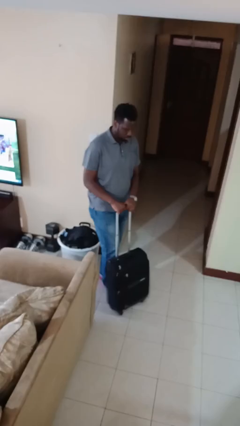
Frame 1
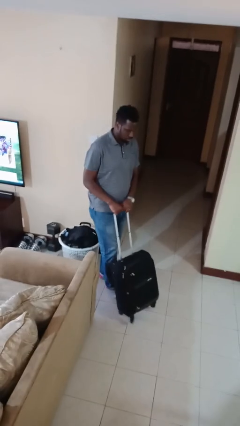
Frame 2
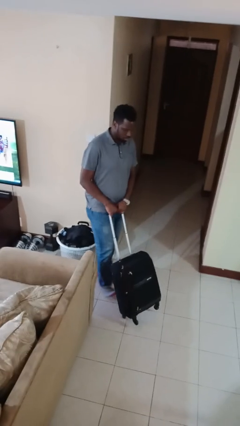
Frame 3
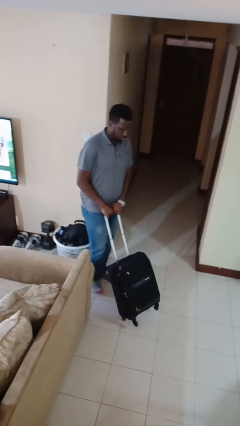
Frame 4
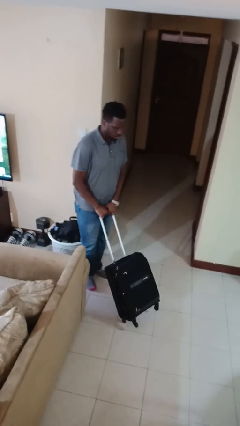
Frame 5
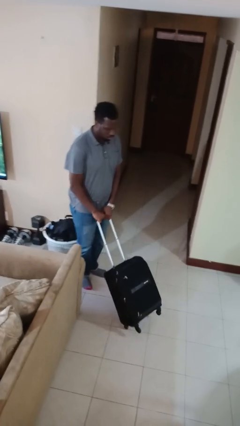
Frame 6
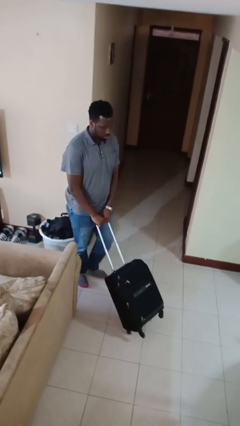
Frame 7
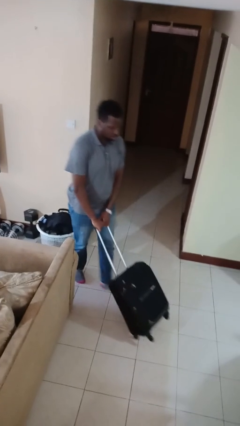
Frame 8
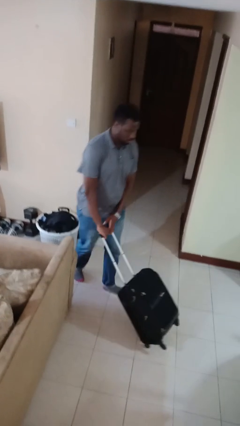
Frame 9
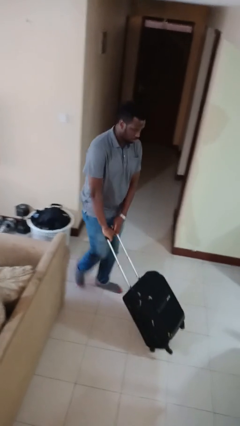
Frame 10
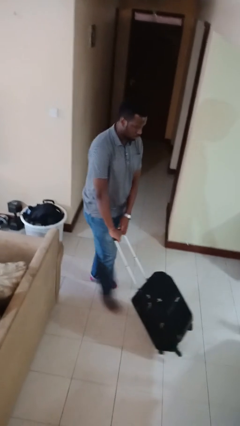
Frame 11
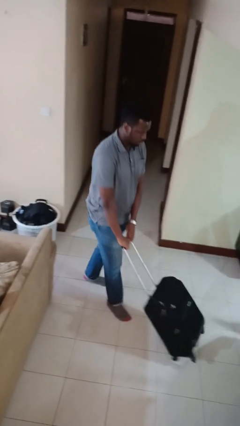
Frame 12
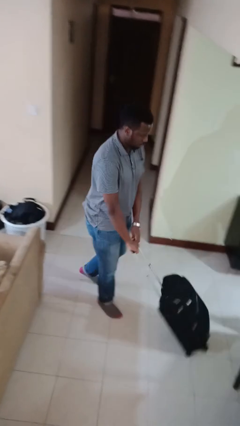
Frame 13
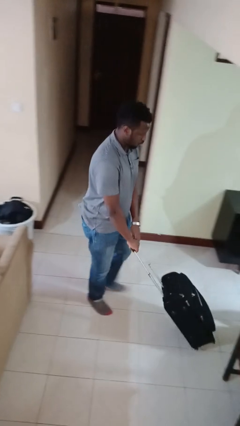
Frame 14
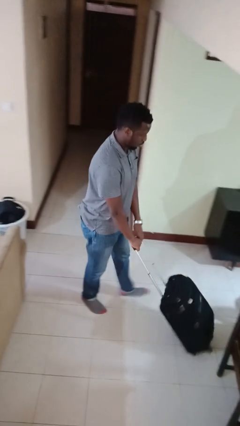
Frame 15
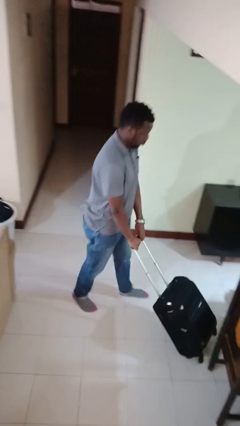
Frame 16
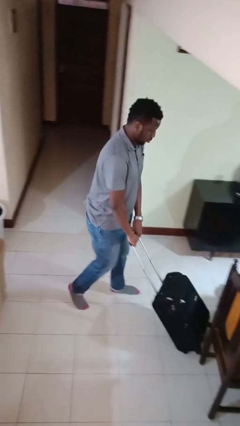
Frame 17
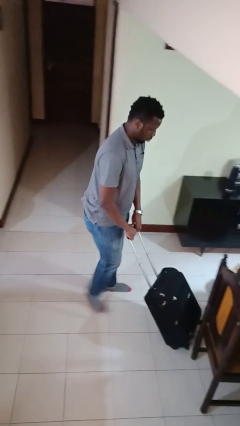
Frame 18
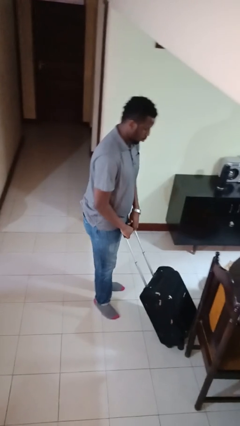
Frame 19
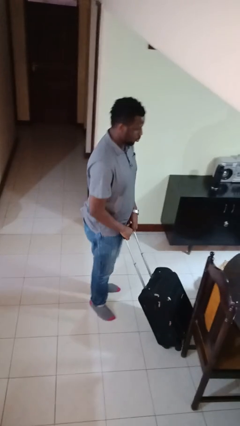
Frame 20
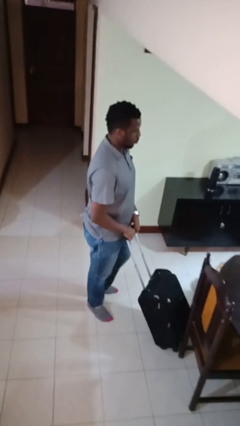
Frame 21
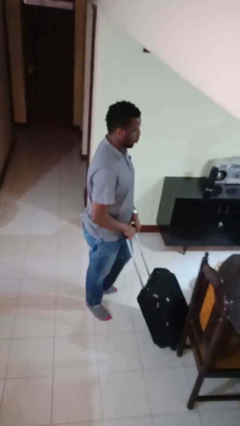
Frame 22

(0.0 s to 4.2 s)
person pushes wheeled cart

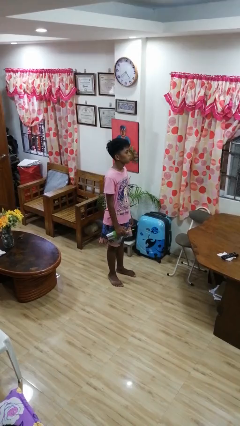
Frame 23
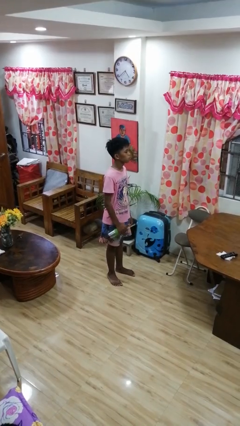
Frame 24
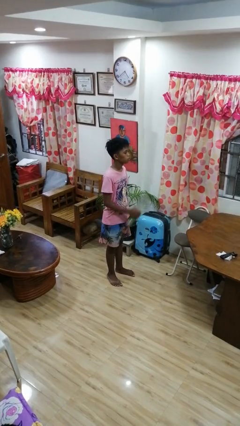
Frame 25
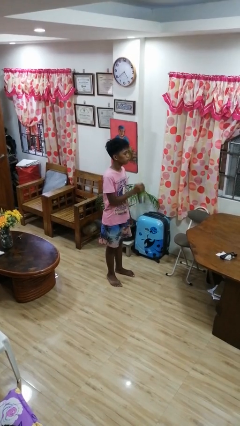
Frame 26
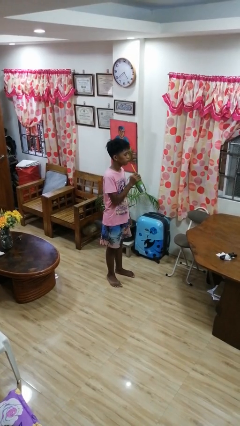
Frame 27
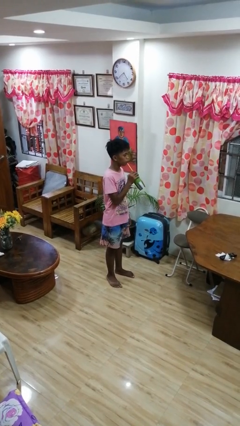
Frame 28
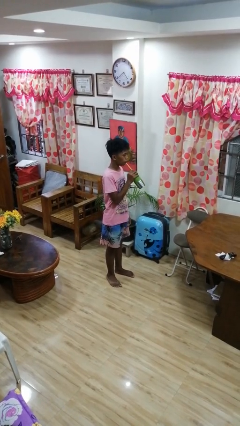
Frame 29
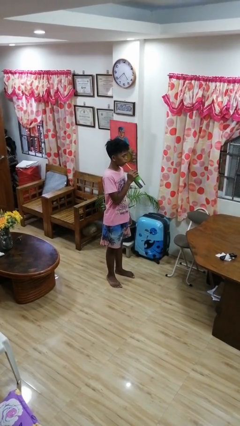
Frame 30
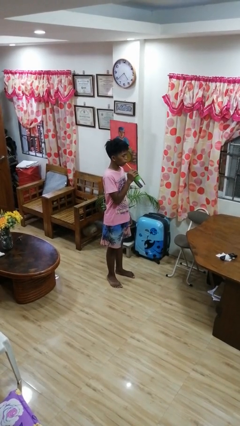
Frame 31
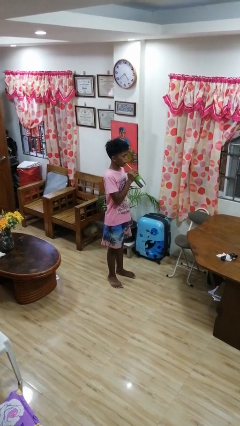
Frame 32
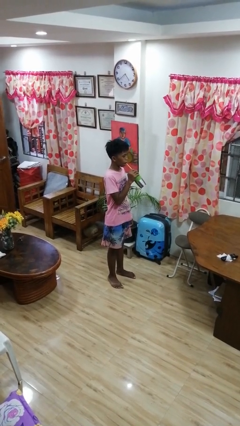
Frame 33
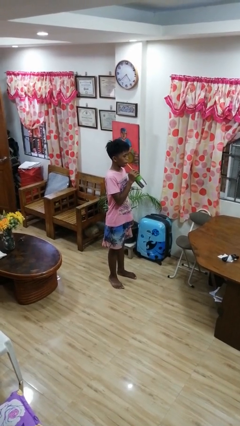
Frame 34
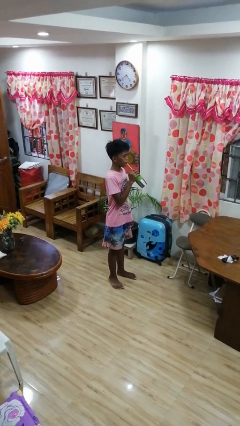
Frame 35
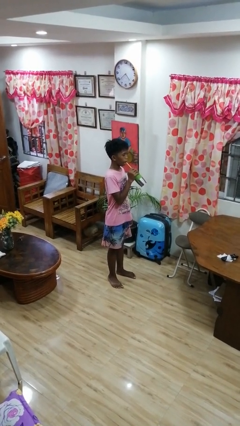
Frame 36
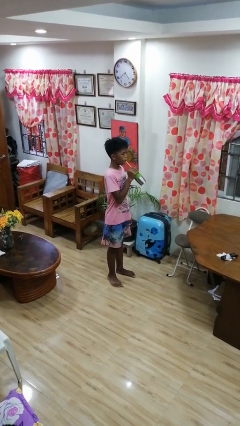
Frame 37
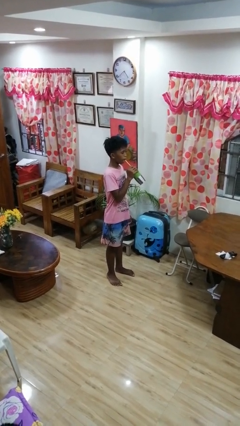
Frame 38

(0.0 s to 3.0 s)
person drinks from straw

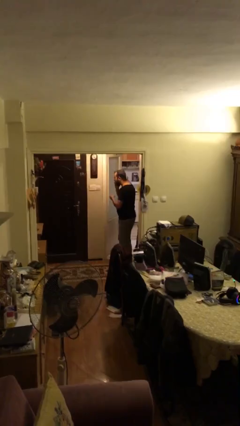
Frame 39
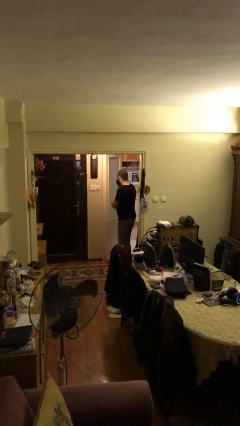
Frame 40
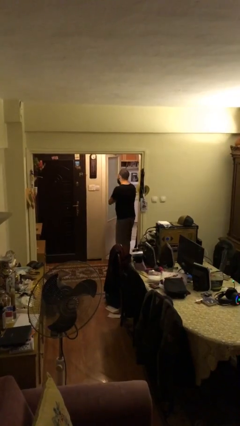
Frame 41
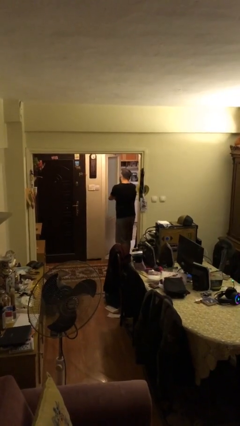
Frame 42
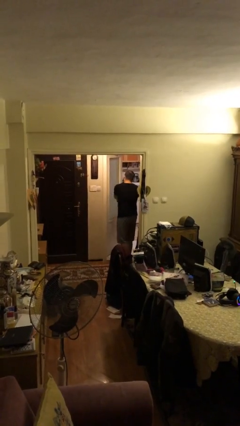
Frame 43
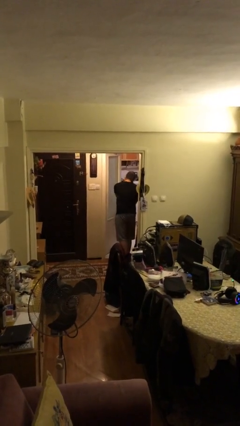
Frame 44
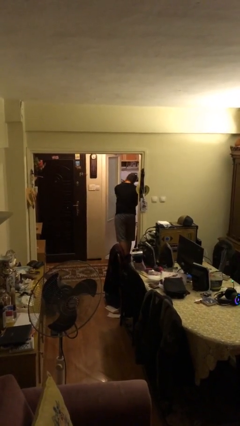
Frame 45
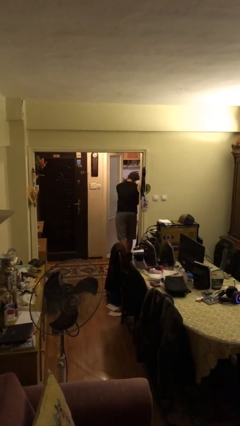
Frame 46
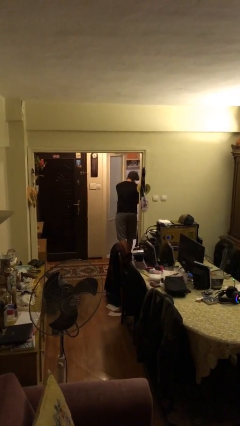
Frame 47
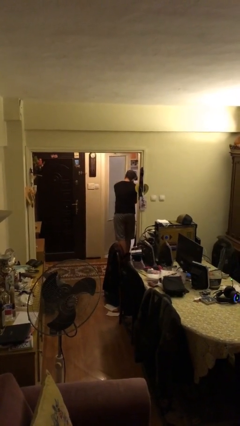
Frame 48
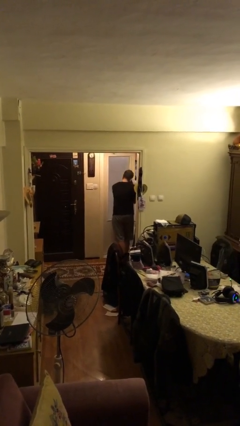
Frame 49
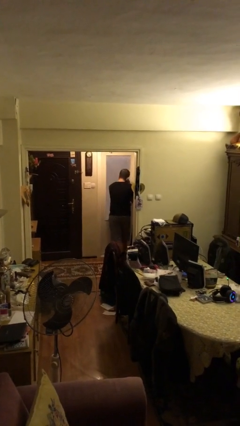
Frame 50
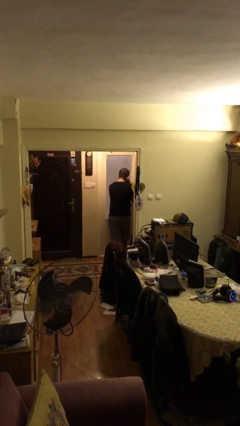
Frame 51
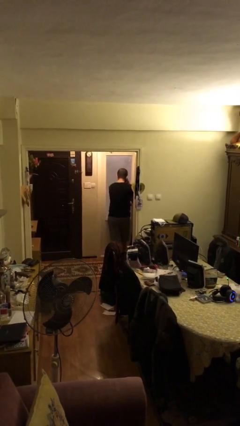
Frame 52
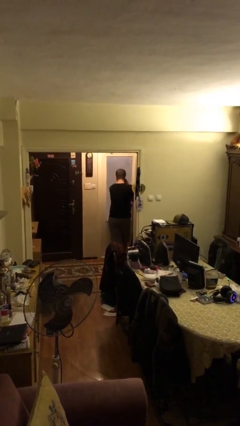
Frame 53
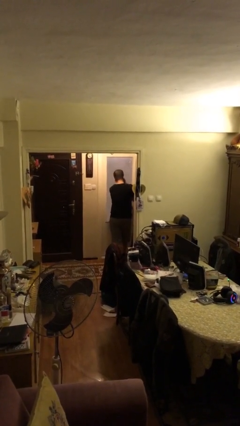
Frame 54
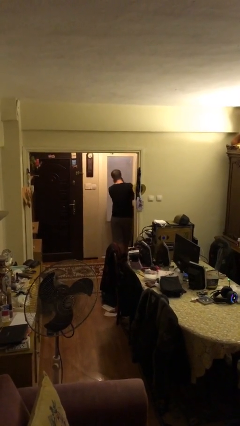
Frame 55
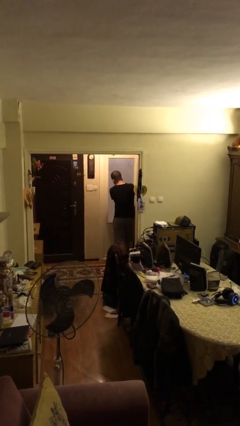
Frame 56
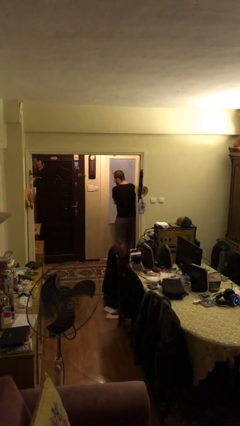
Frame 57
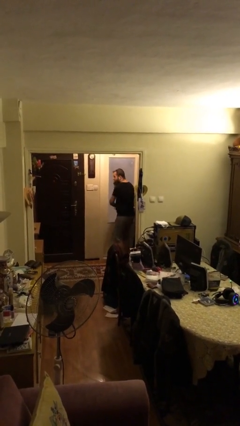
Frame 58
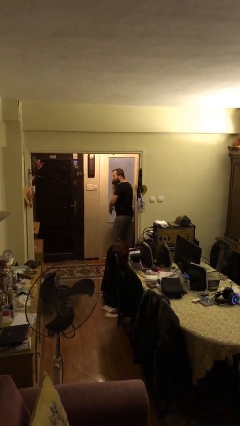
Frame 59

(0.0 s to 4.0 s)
person closes facility door

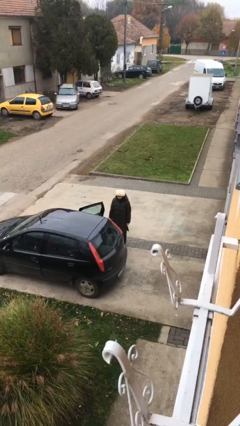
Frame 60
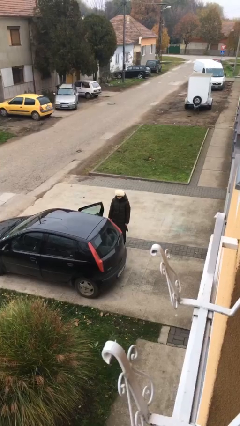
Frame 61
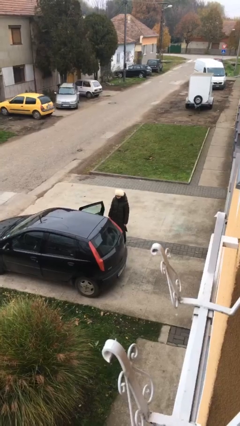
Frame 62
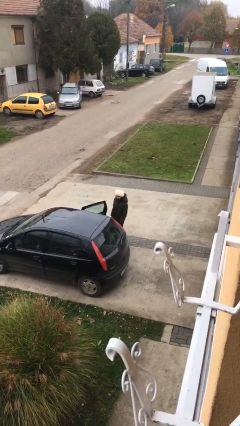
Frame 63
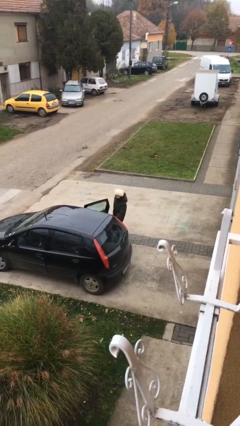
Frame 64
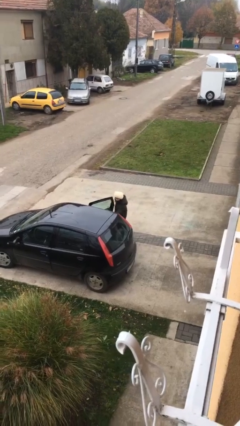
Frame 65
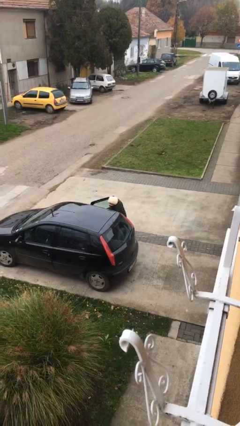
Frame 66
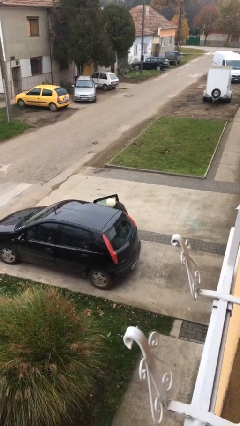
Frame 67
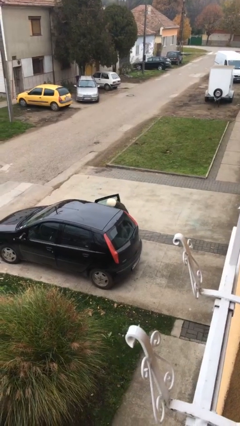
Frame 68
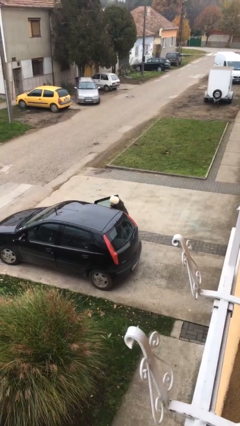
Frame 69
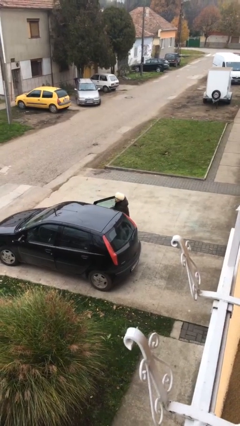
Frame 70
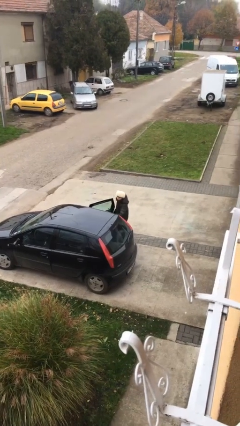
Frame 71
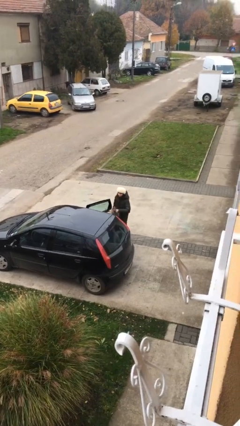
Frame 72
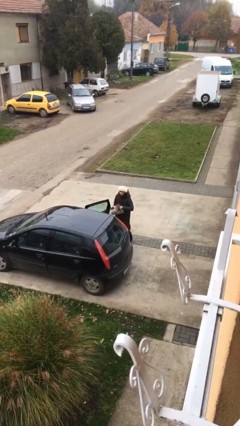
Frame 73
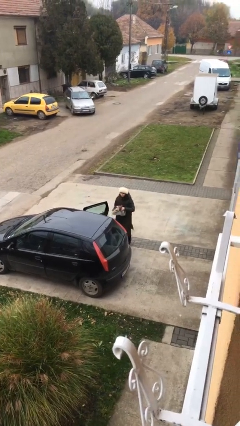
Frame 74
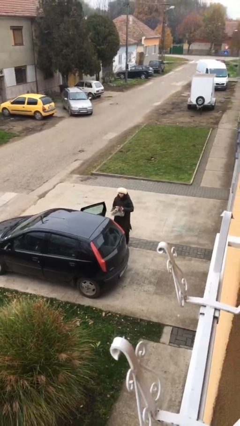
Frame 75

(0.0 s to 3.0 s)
person unloads car

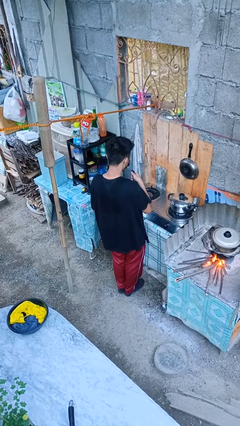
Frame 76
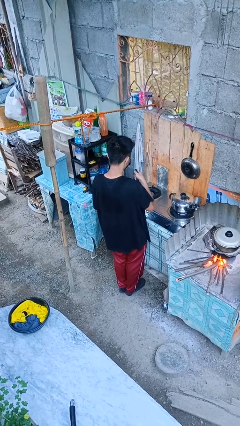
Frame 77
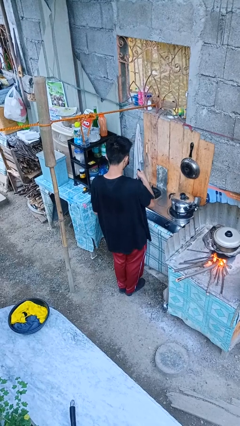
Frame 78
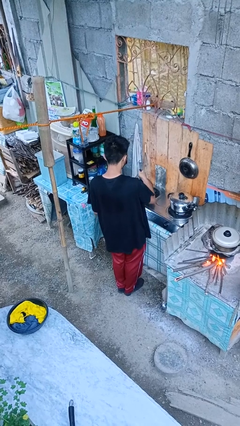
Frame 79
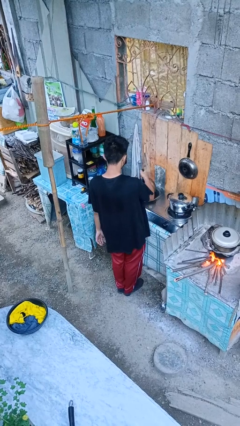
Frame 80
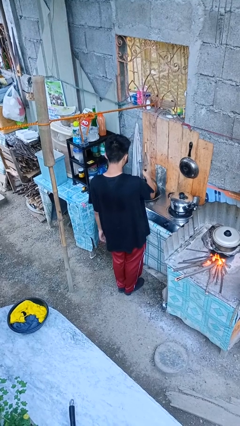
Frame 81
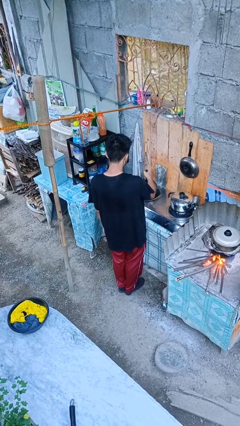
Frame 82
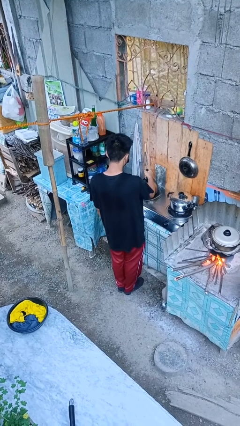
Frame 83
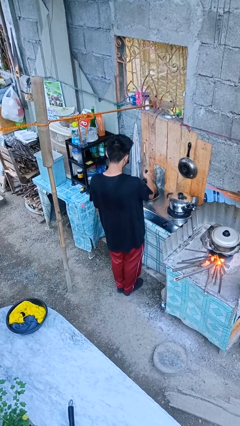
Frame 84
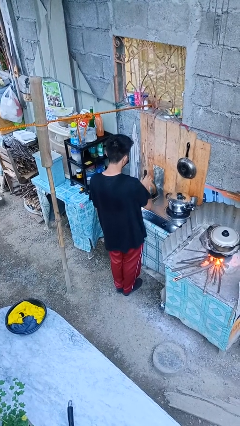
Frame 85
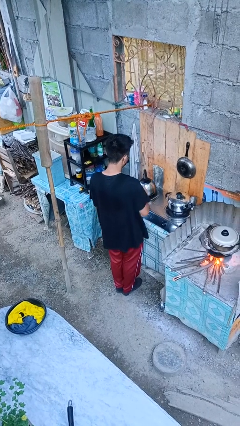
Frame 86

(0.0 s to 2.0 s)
person puts down object on countertop

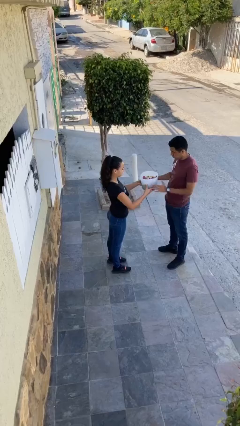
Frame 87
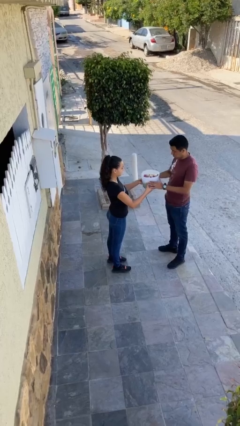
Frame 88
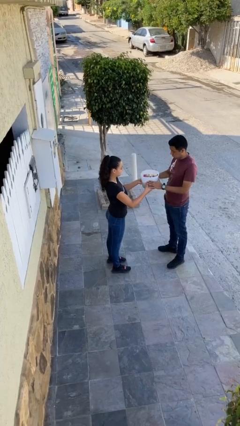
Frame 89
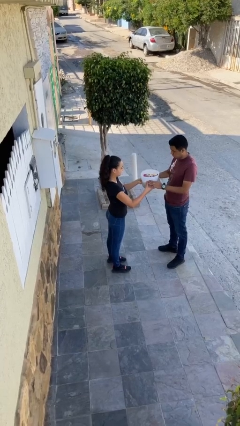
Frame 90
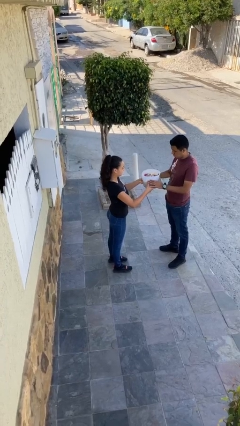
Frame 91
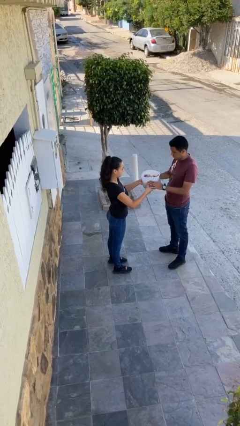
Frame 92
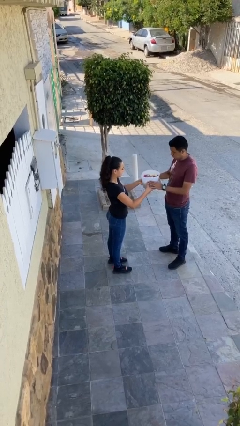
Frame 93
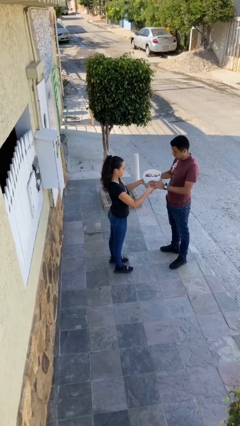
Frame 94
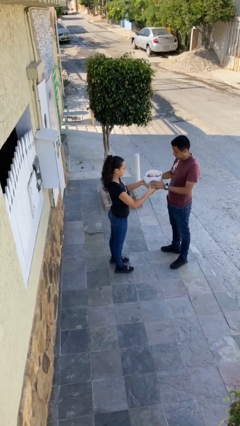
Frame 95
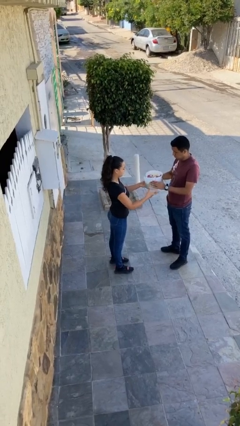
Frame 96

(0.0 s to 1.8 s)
person transfers object to person
